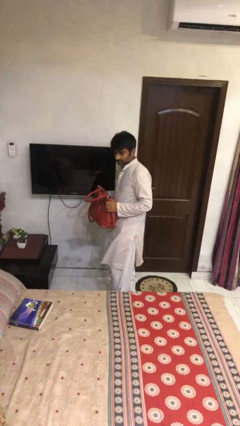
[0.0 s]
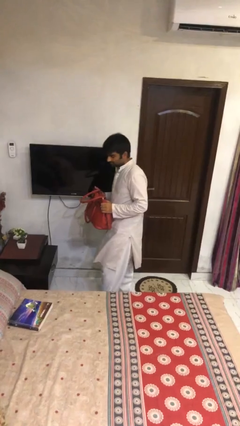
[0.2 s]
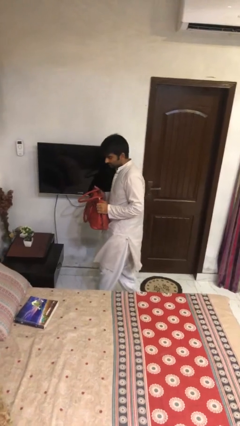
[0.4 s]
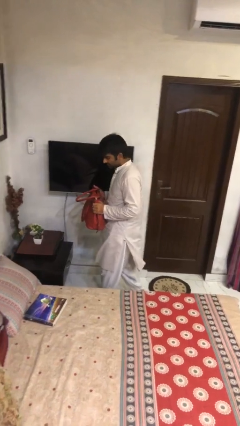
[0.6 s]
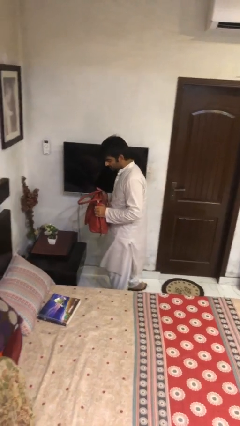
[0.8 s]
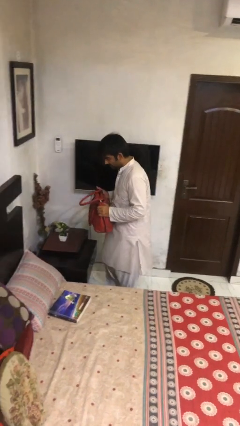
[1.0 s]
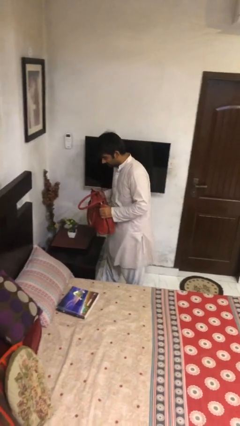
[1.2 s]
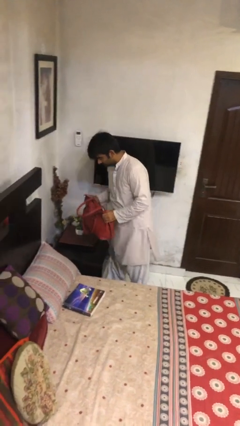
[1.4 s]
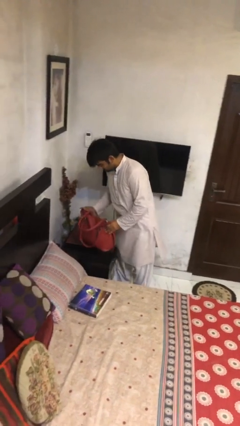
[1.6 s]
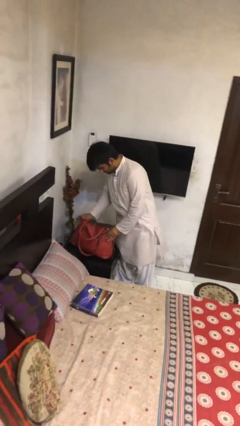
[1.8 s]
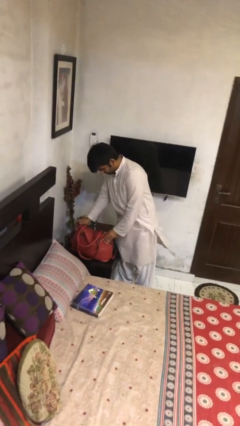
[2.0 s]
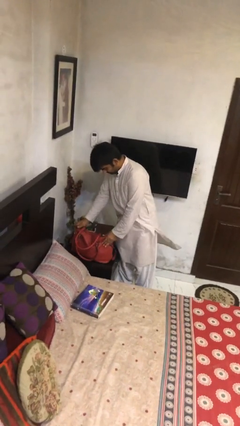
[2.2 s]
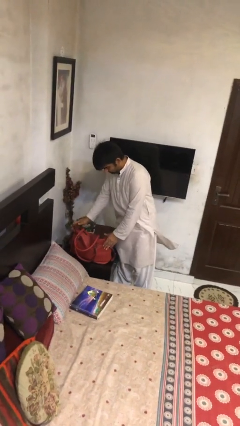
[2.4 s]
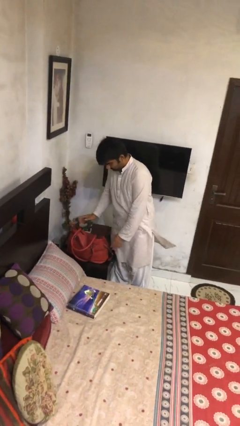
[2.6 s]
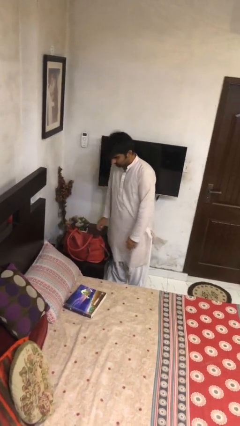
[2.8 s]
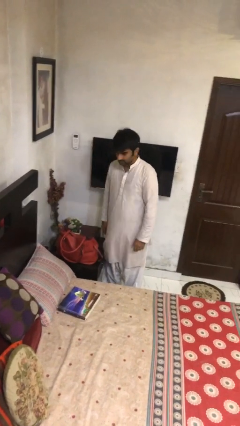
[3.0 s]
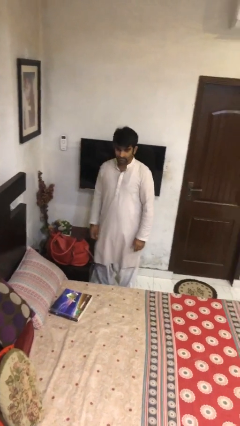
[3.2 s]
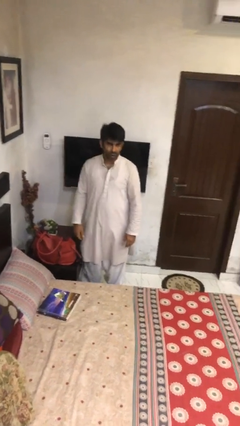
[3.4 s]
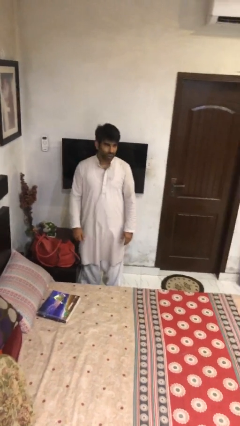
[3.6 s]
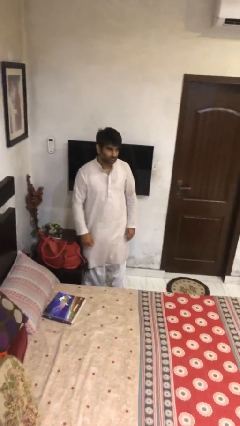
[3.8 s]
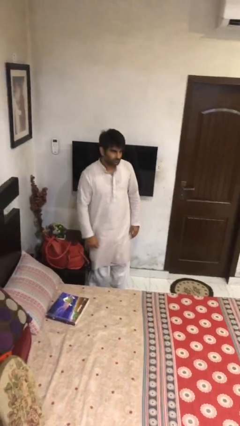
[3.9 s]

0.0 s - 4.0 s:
person puts down object on floor

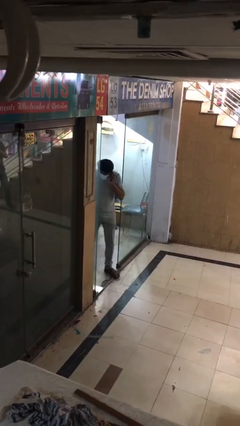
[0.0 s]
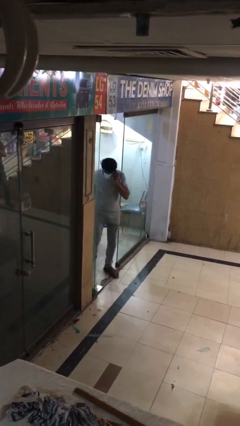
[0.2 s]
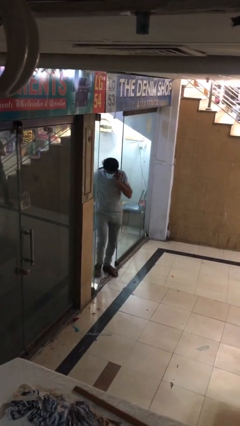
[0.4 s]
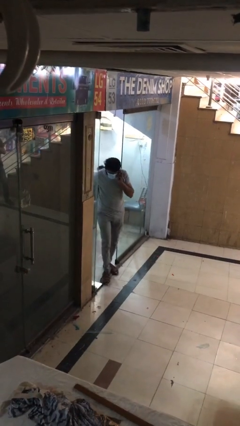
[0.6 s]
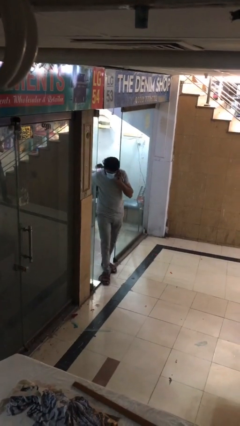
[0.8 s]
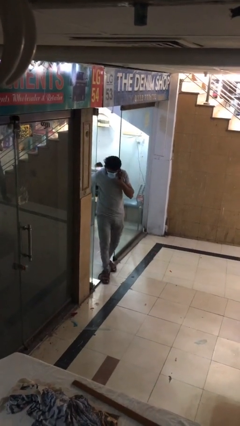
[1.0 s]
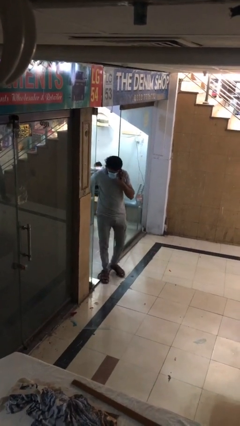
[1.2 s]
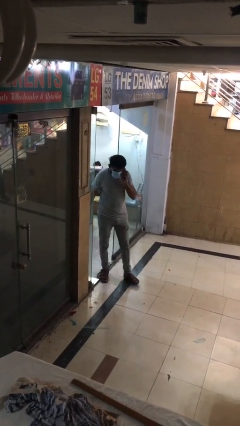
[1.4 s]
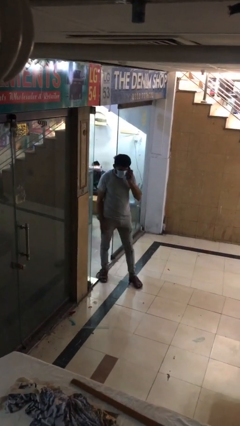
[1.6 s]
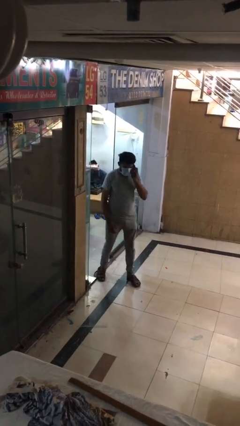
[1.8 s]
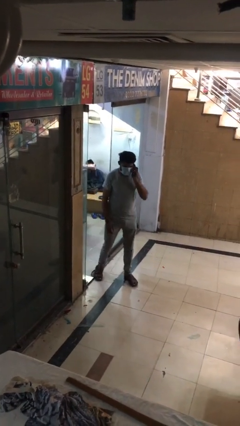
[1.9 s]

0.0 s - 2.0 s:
person enters scene through structure

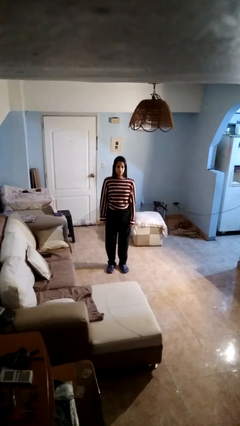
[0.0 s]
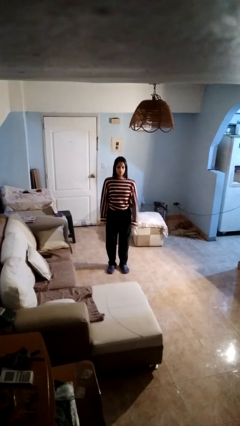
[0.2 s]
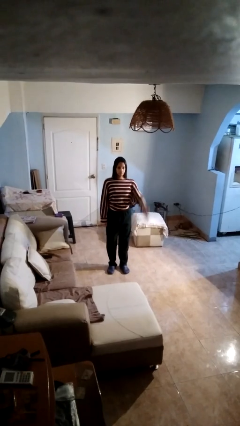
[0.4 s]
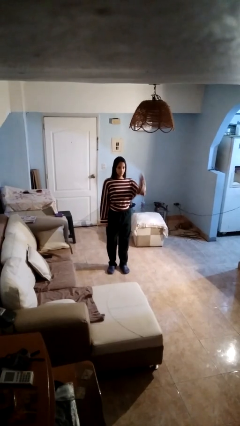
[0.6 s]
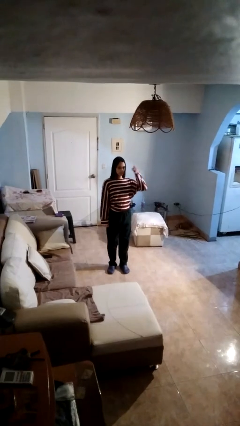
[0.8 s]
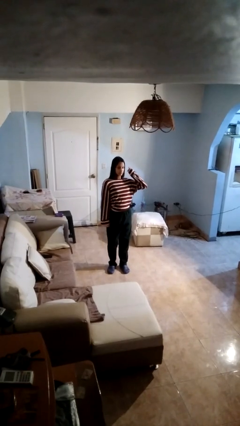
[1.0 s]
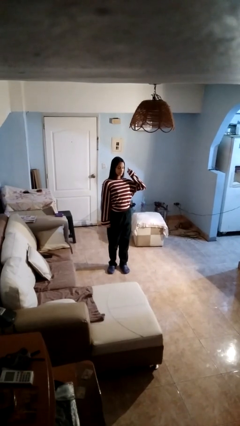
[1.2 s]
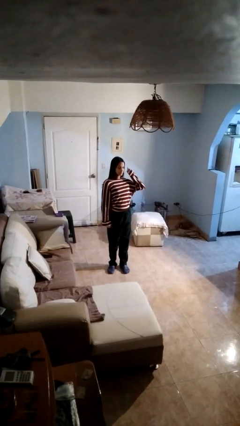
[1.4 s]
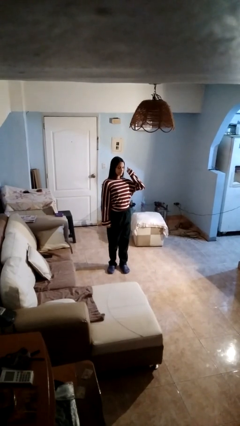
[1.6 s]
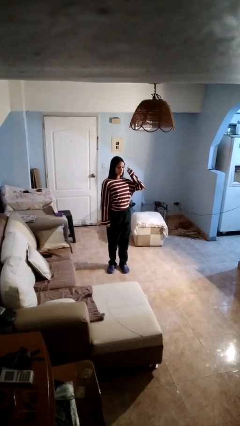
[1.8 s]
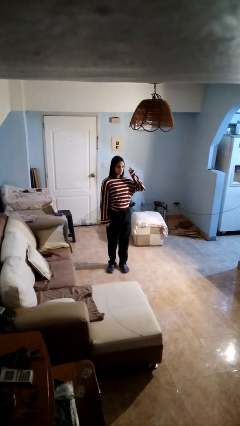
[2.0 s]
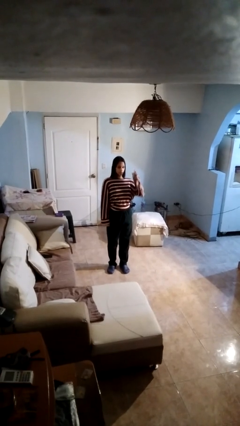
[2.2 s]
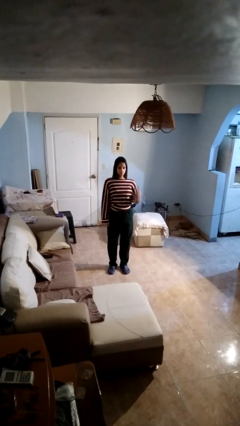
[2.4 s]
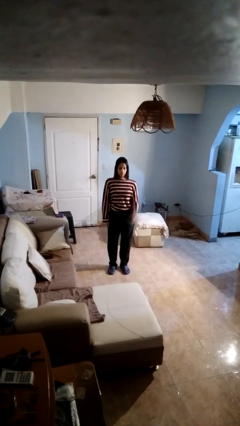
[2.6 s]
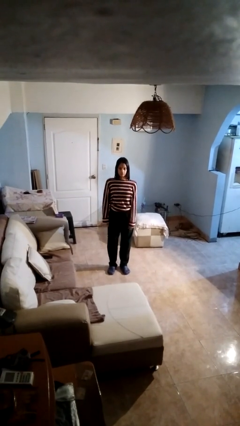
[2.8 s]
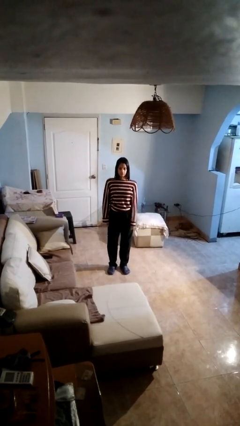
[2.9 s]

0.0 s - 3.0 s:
person gestures behind me

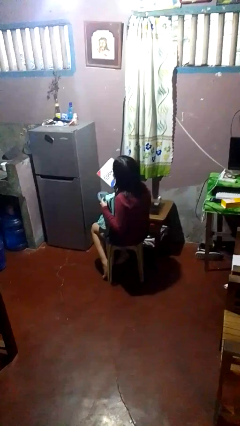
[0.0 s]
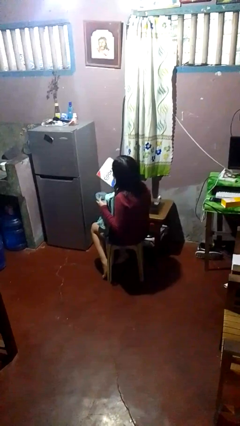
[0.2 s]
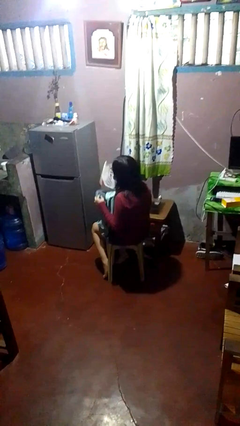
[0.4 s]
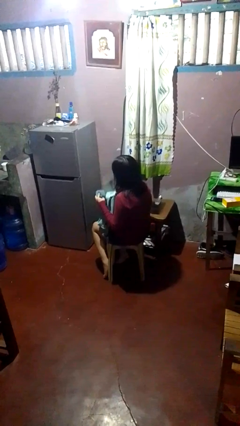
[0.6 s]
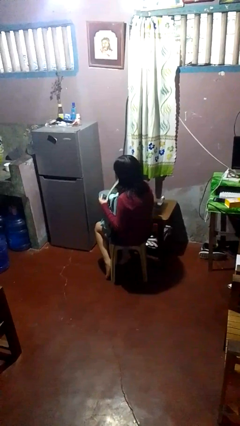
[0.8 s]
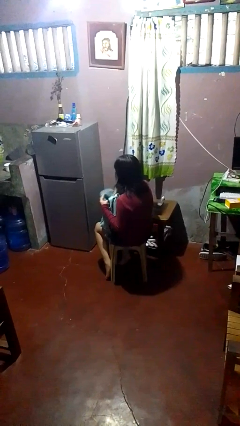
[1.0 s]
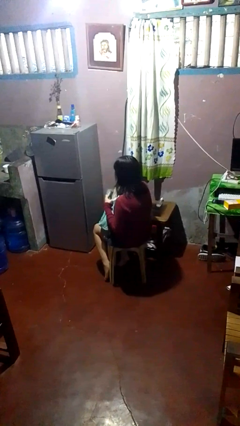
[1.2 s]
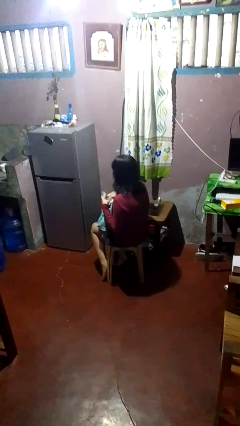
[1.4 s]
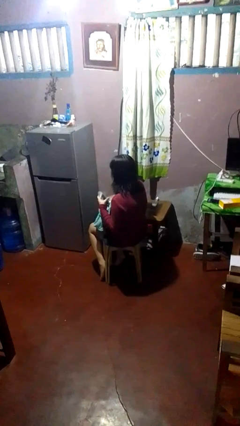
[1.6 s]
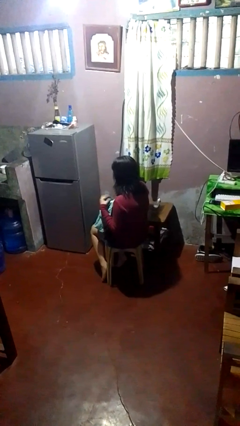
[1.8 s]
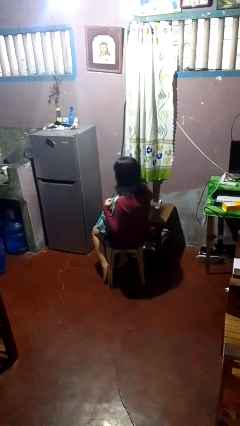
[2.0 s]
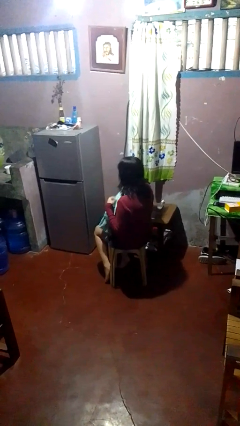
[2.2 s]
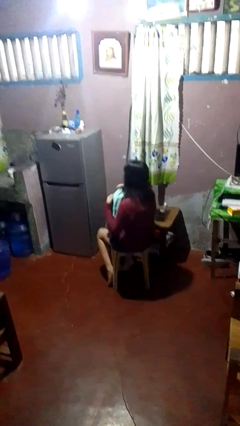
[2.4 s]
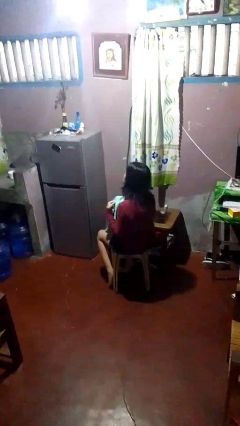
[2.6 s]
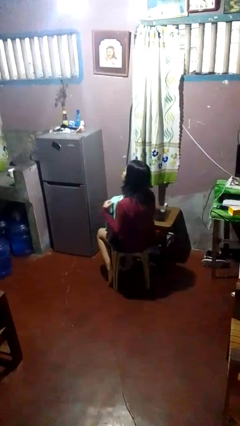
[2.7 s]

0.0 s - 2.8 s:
person puts object into backpack

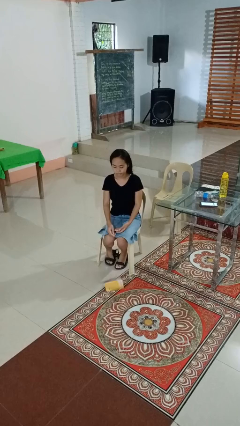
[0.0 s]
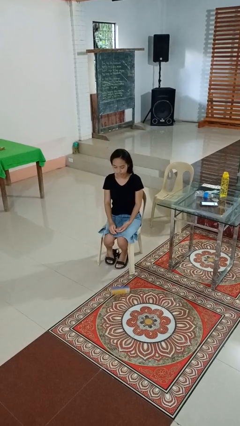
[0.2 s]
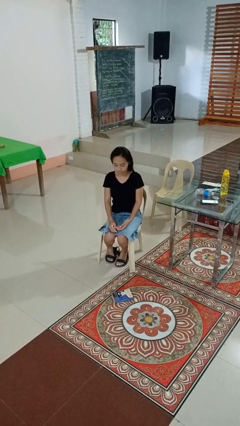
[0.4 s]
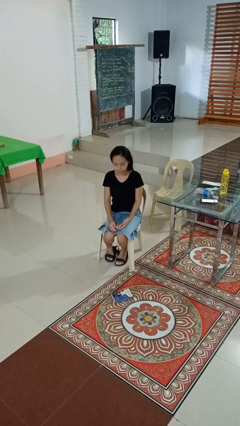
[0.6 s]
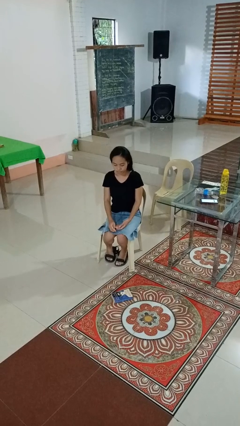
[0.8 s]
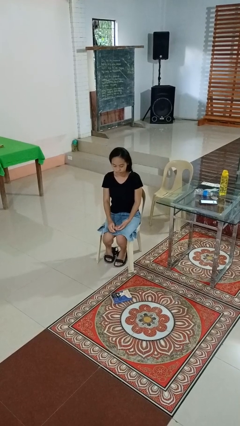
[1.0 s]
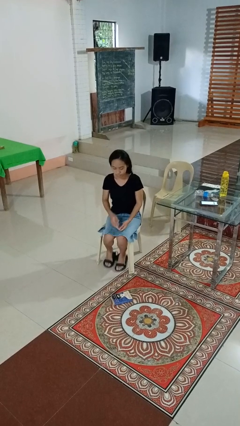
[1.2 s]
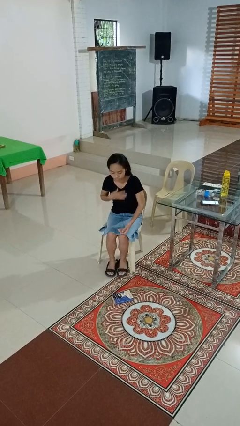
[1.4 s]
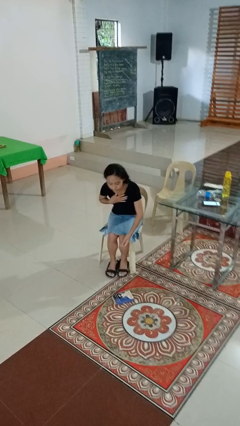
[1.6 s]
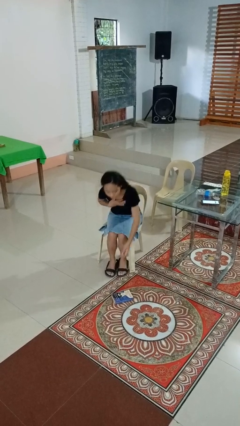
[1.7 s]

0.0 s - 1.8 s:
person drops object

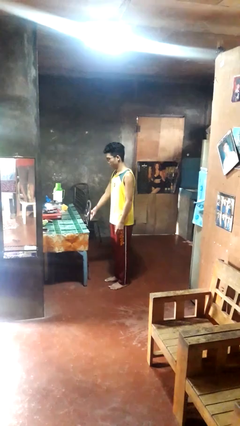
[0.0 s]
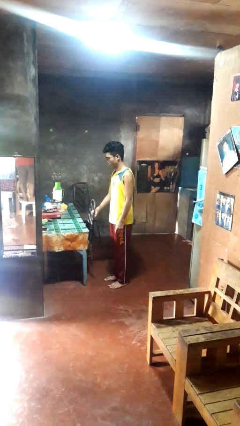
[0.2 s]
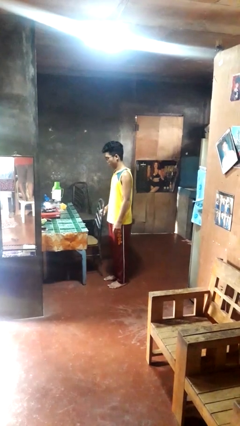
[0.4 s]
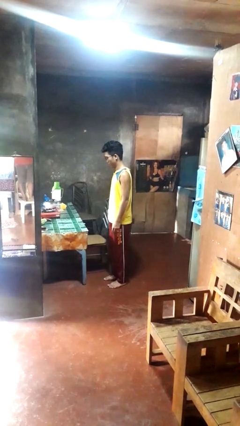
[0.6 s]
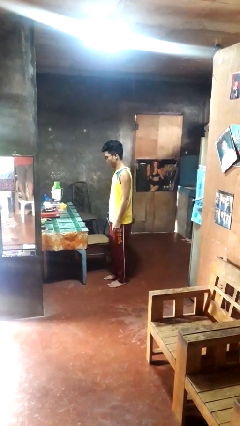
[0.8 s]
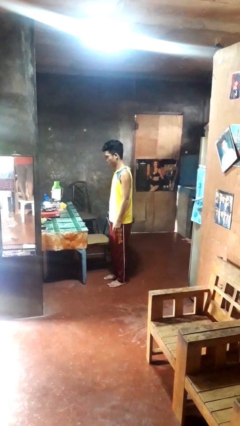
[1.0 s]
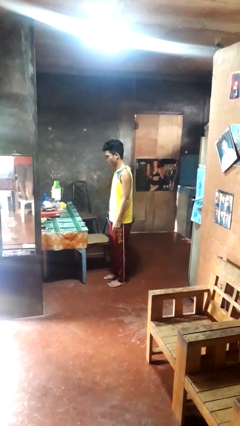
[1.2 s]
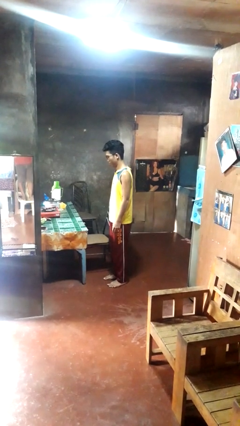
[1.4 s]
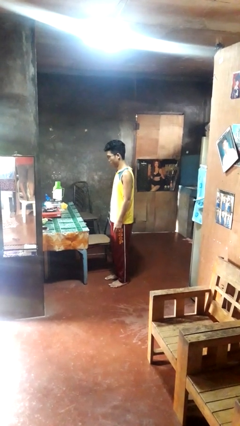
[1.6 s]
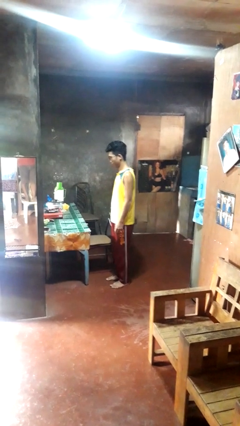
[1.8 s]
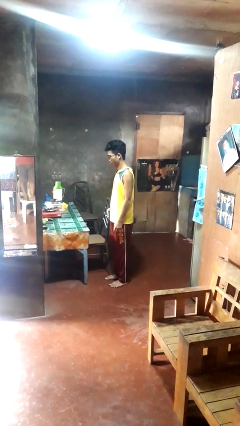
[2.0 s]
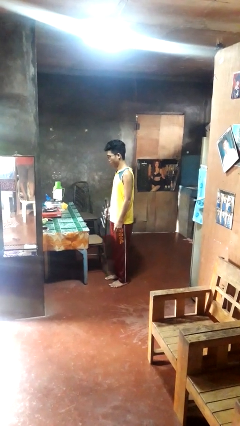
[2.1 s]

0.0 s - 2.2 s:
person pulls out chair

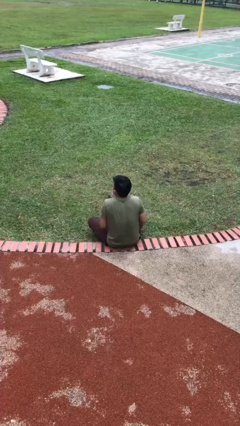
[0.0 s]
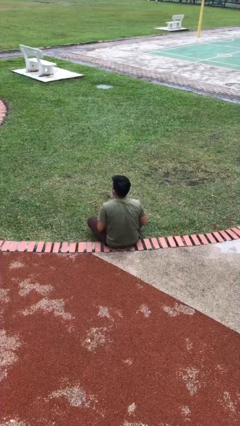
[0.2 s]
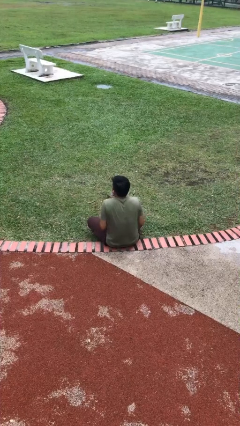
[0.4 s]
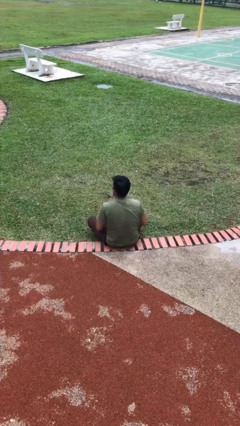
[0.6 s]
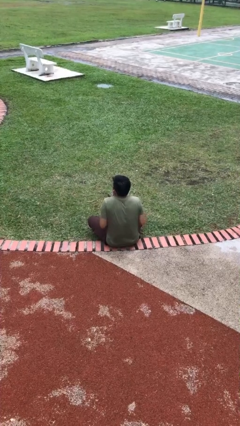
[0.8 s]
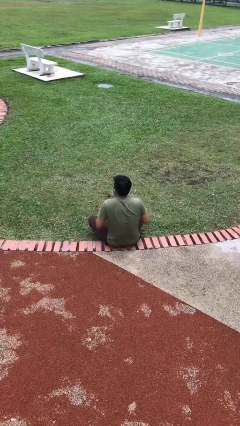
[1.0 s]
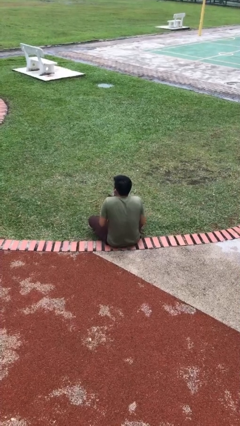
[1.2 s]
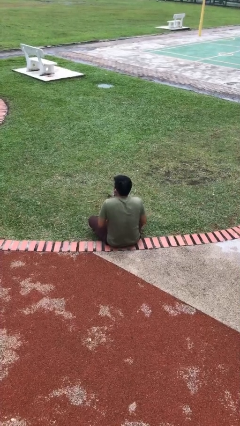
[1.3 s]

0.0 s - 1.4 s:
person shrugs
